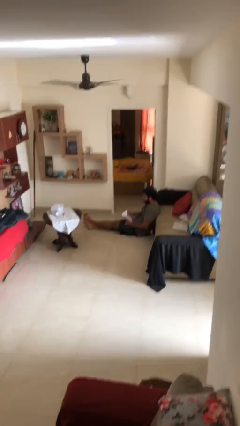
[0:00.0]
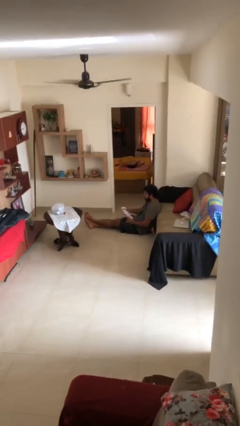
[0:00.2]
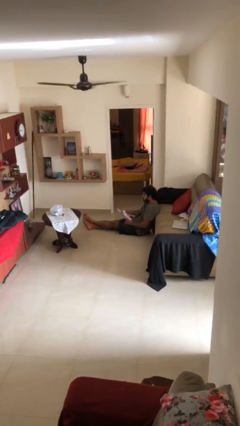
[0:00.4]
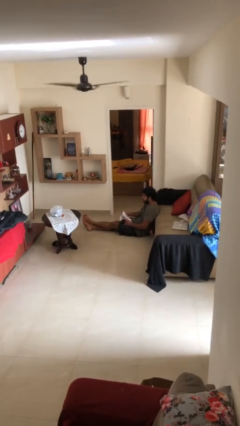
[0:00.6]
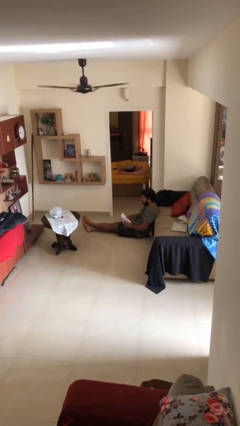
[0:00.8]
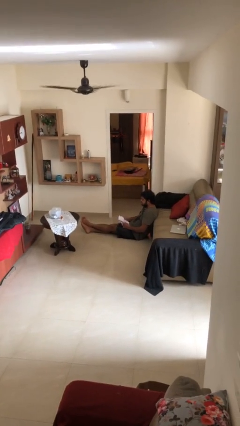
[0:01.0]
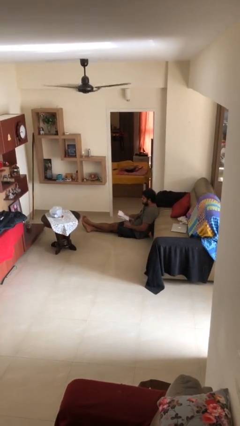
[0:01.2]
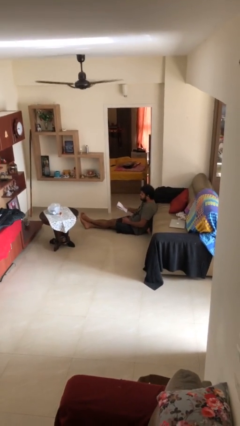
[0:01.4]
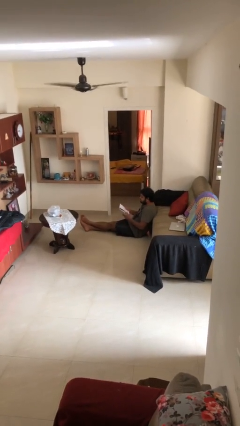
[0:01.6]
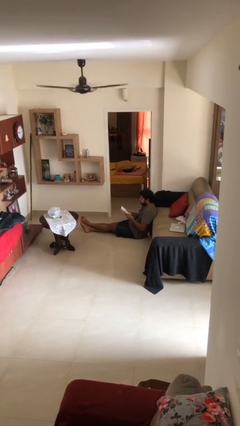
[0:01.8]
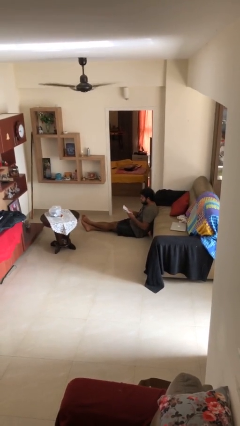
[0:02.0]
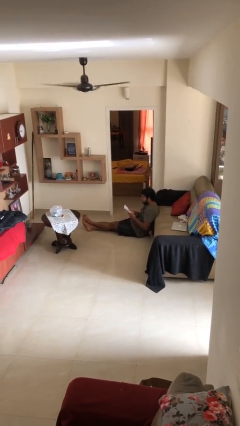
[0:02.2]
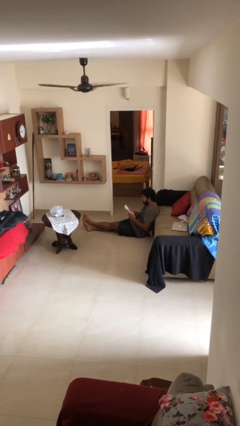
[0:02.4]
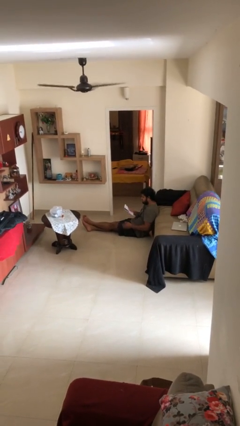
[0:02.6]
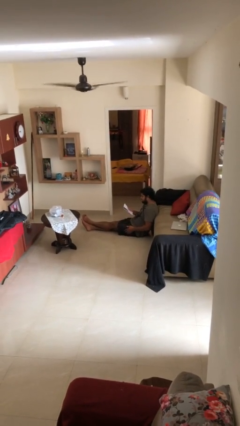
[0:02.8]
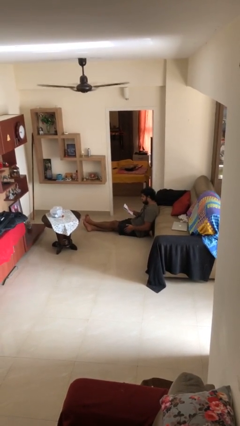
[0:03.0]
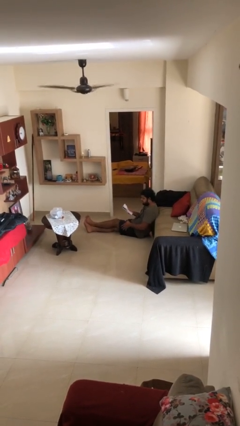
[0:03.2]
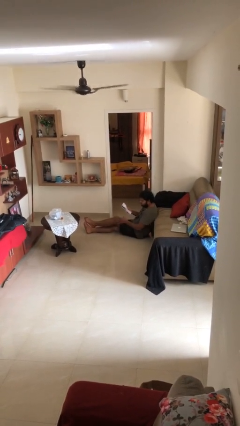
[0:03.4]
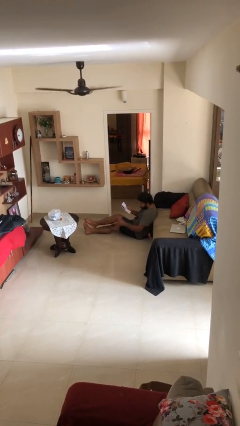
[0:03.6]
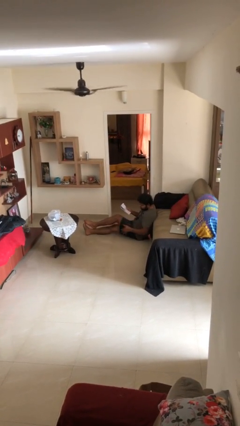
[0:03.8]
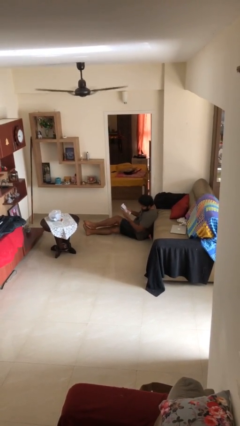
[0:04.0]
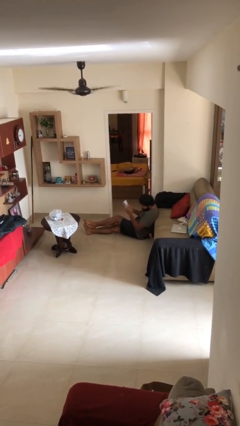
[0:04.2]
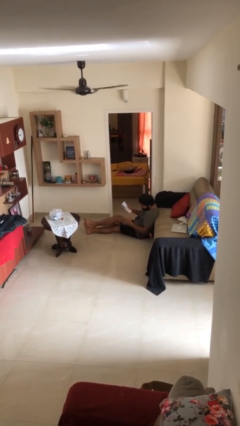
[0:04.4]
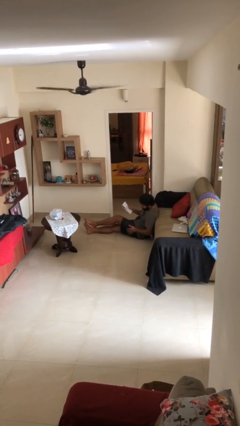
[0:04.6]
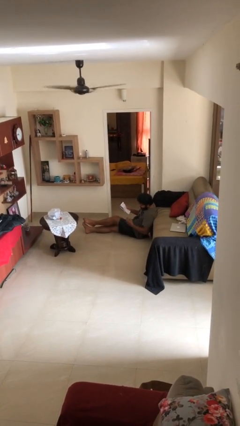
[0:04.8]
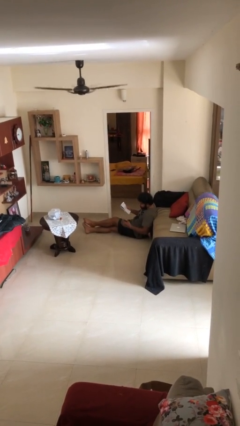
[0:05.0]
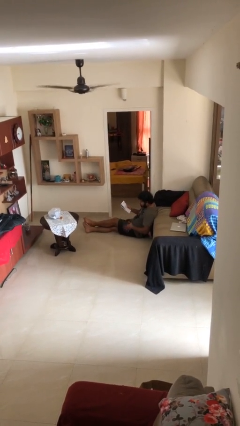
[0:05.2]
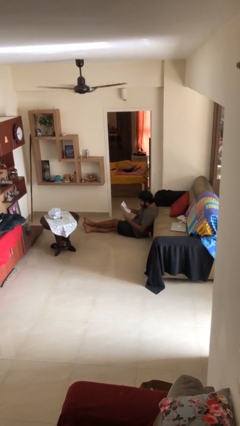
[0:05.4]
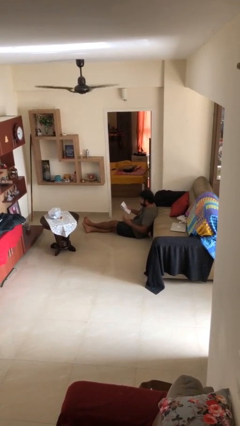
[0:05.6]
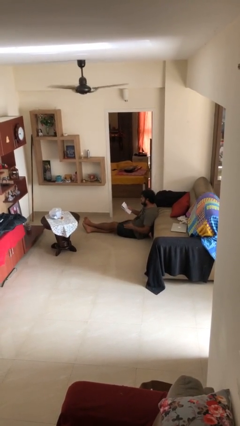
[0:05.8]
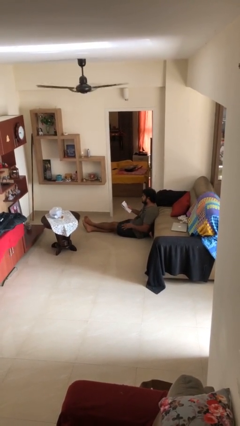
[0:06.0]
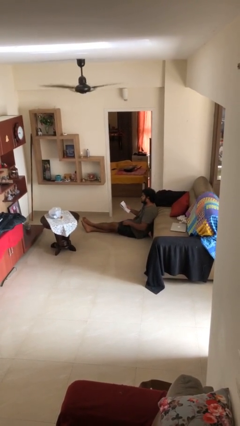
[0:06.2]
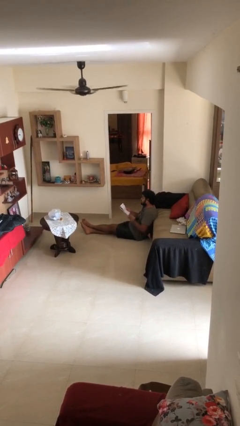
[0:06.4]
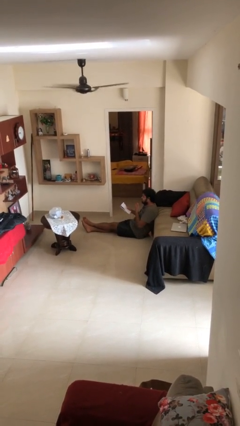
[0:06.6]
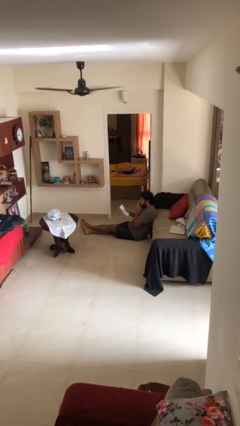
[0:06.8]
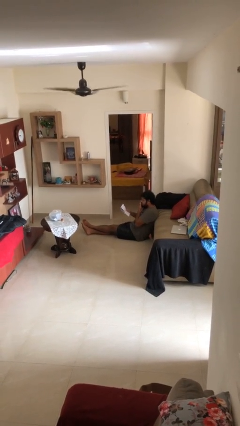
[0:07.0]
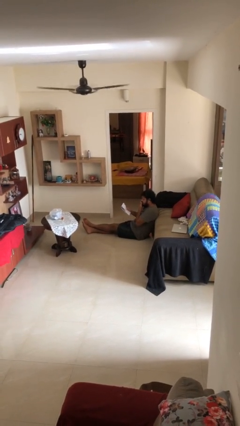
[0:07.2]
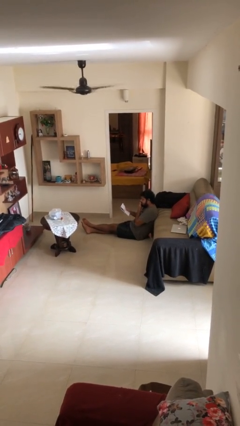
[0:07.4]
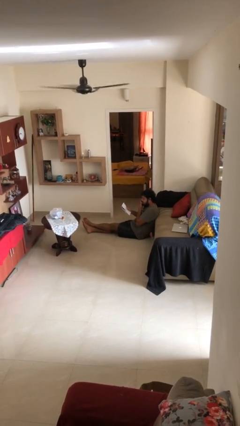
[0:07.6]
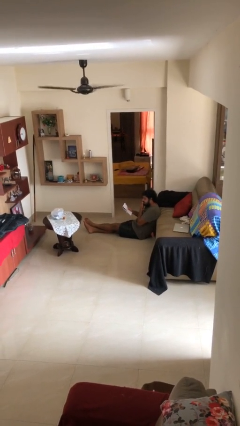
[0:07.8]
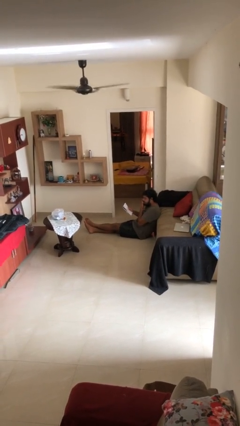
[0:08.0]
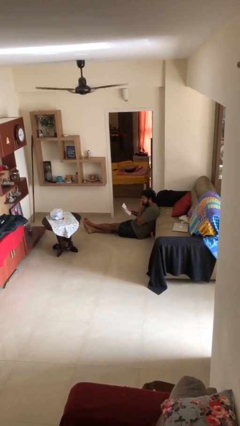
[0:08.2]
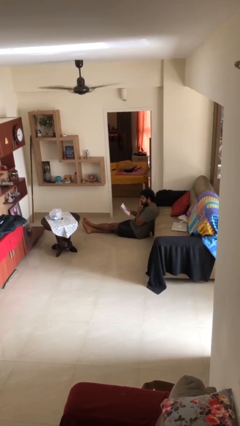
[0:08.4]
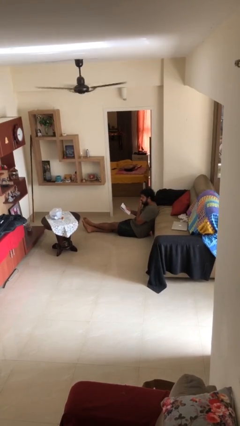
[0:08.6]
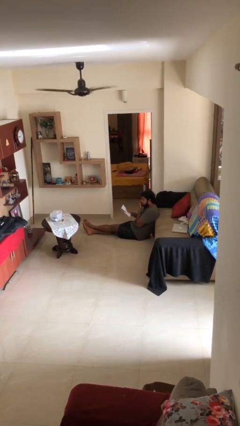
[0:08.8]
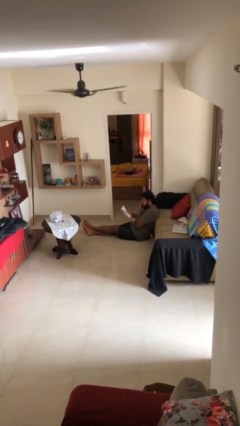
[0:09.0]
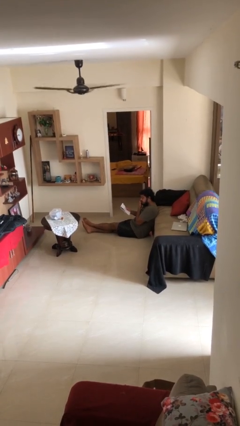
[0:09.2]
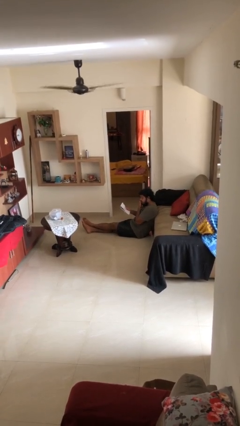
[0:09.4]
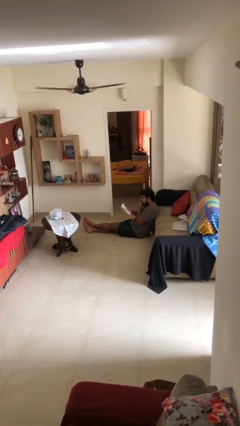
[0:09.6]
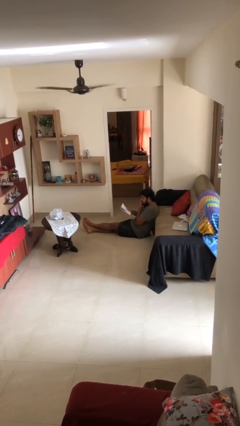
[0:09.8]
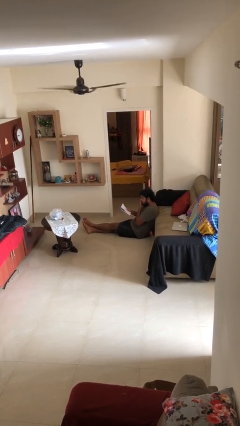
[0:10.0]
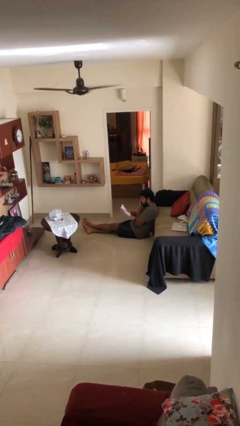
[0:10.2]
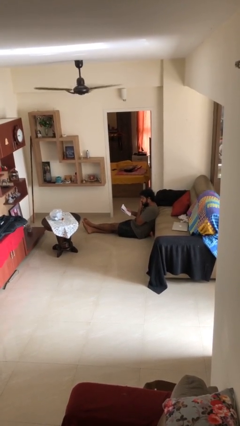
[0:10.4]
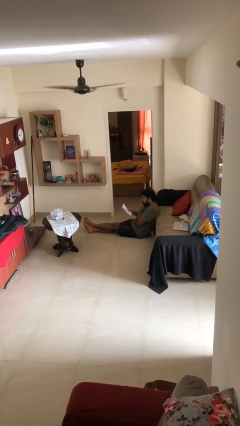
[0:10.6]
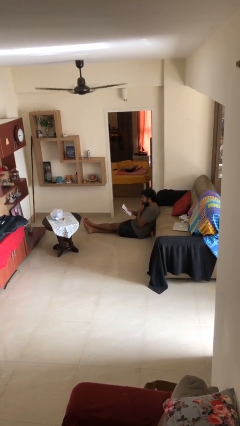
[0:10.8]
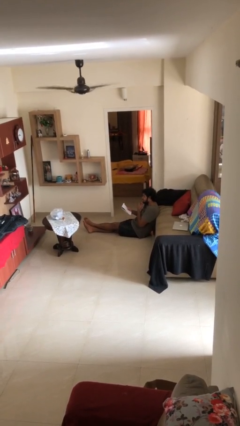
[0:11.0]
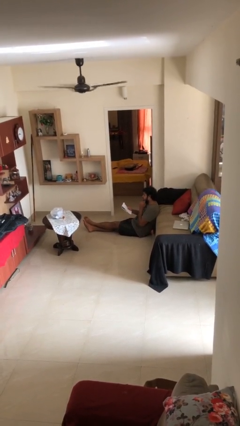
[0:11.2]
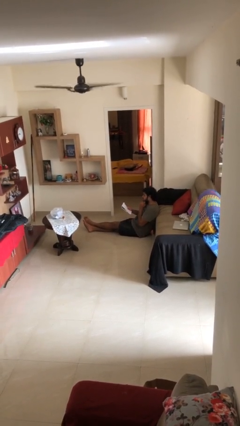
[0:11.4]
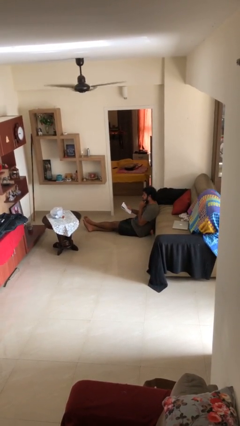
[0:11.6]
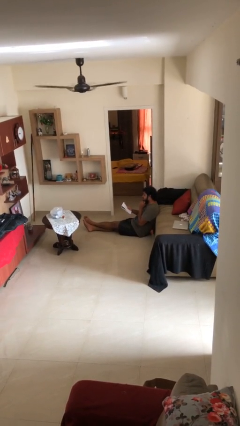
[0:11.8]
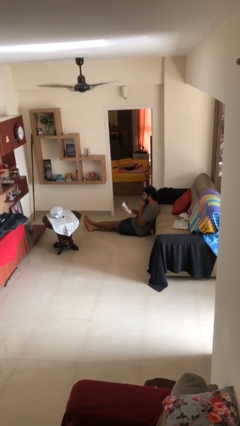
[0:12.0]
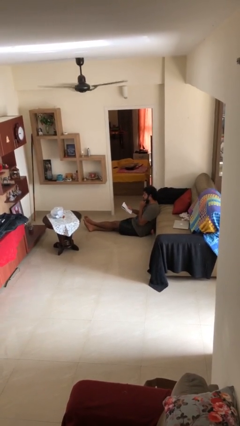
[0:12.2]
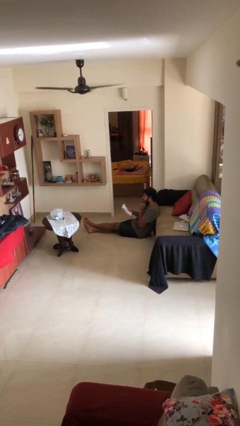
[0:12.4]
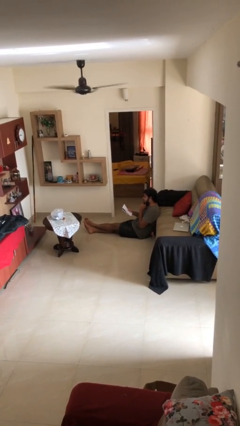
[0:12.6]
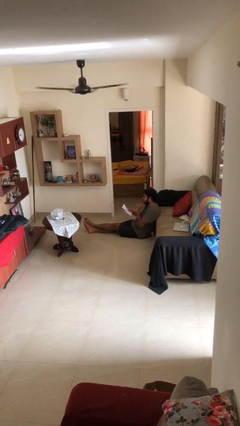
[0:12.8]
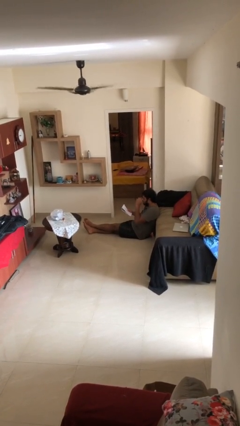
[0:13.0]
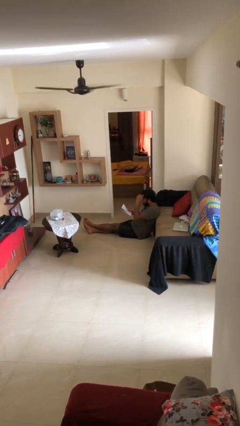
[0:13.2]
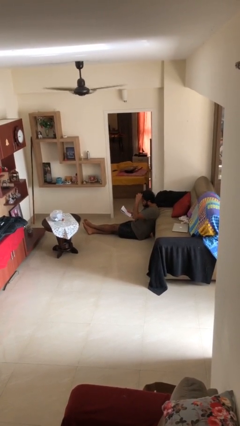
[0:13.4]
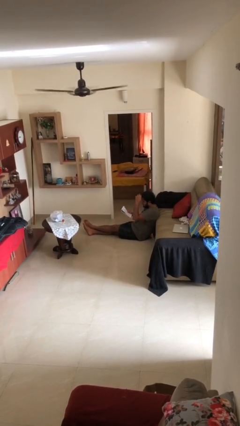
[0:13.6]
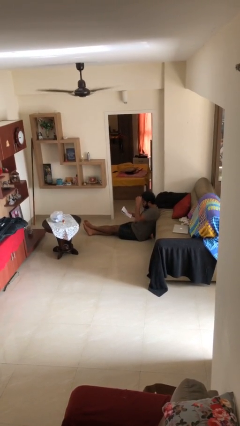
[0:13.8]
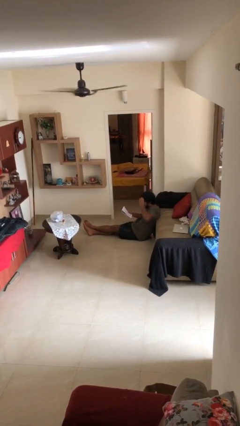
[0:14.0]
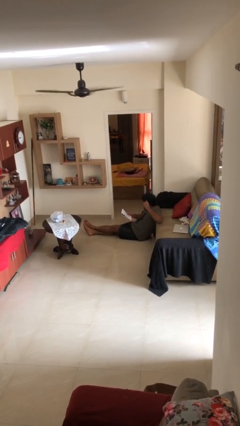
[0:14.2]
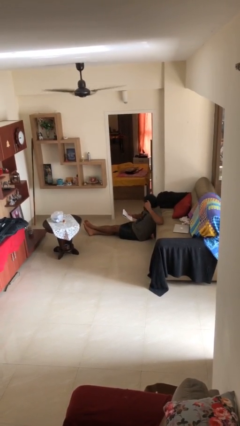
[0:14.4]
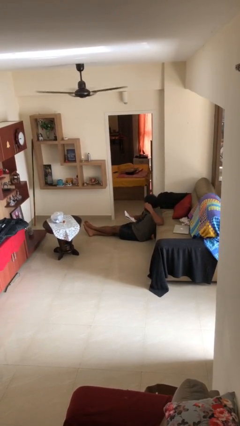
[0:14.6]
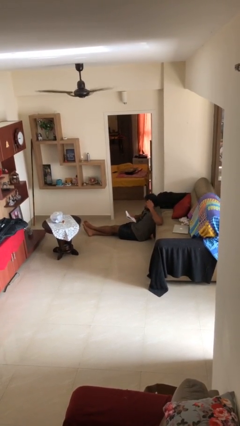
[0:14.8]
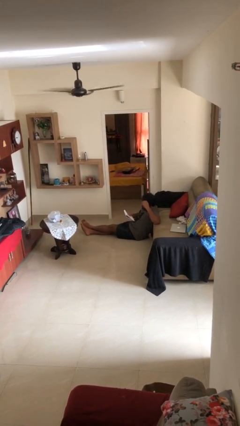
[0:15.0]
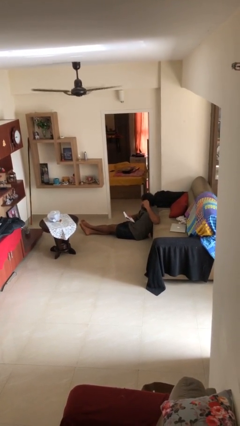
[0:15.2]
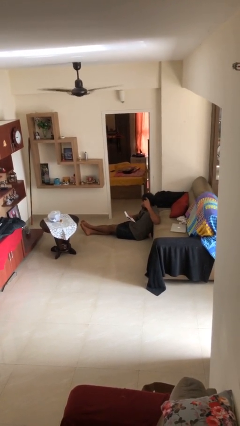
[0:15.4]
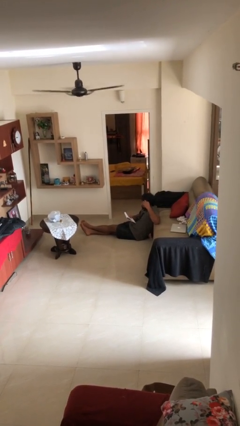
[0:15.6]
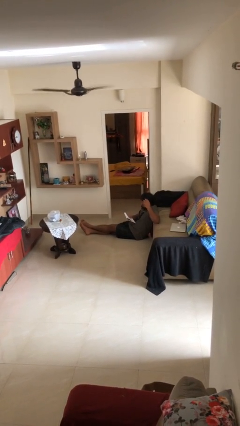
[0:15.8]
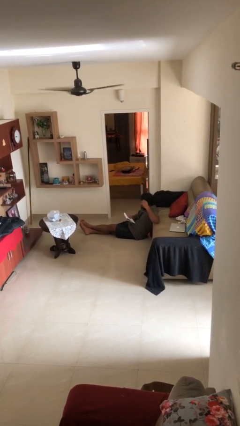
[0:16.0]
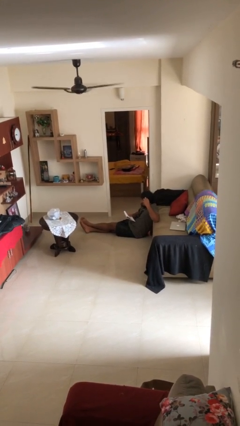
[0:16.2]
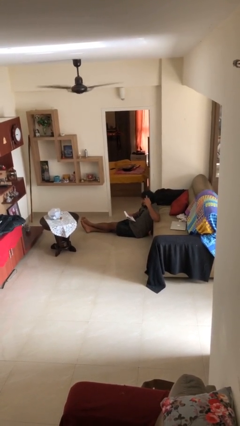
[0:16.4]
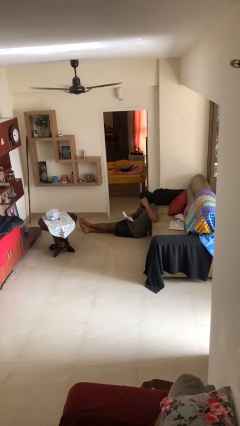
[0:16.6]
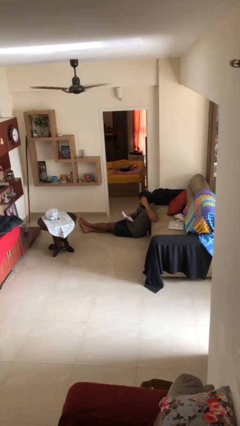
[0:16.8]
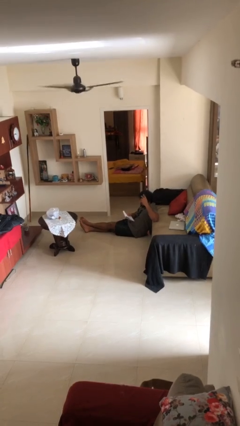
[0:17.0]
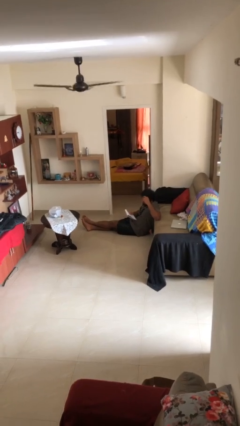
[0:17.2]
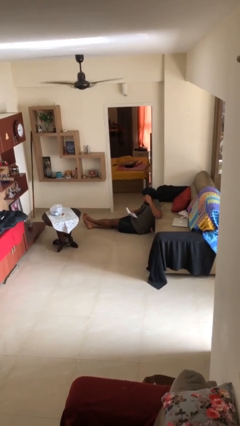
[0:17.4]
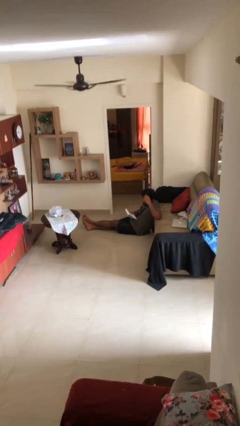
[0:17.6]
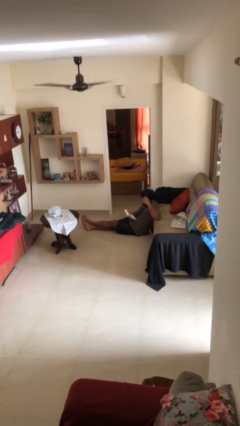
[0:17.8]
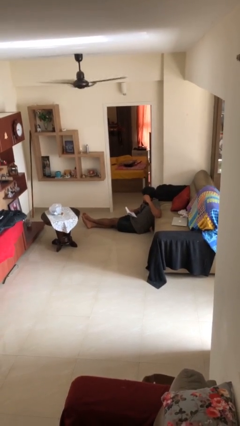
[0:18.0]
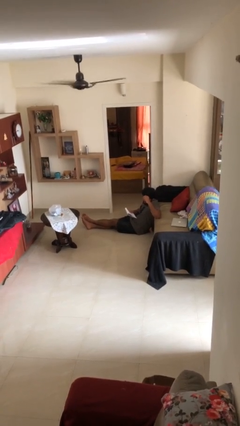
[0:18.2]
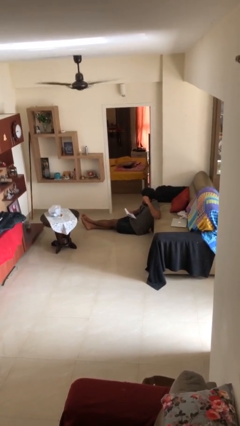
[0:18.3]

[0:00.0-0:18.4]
person reads document
